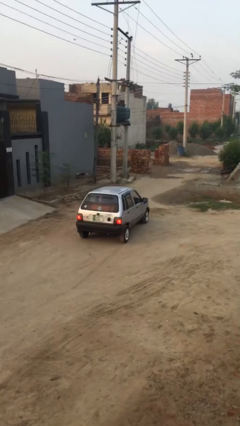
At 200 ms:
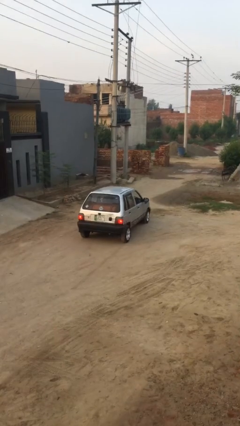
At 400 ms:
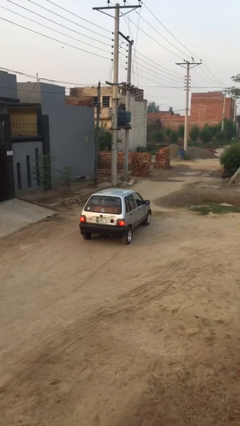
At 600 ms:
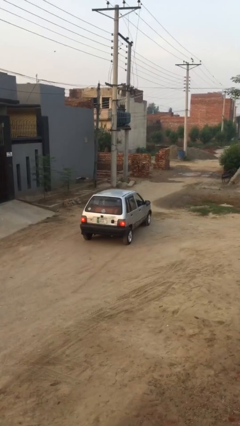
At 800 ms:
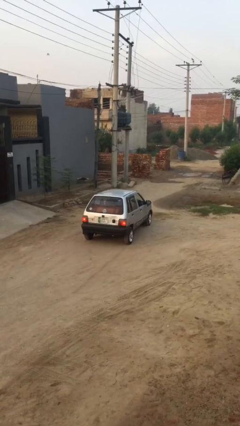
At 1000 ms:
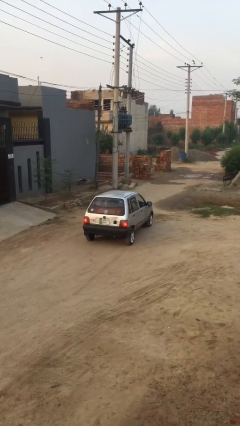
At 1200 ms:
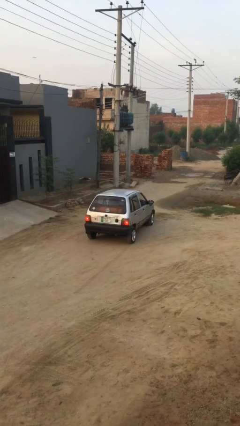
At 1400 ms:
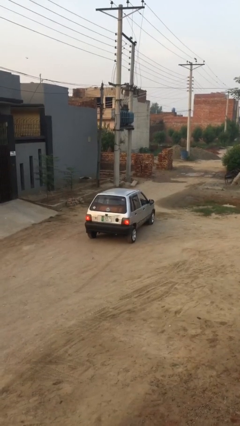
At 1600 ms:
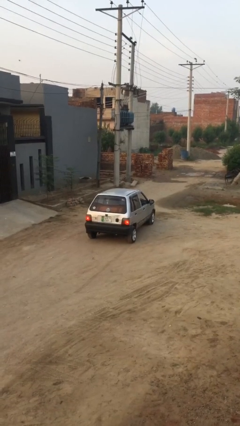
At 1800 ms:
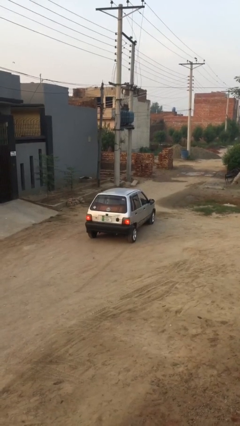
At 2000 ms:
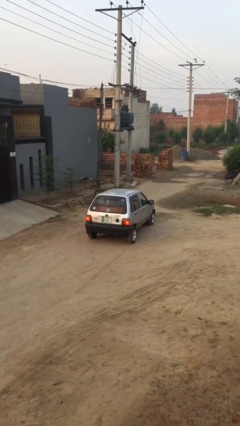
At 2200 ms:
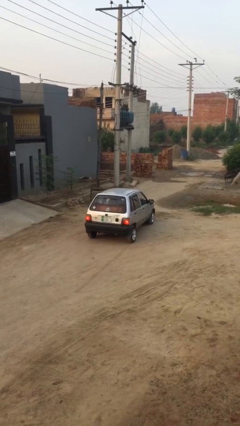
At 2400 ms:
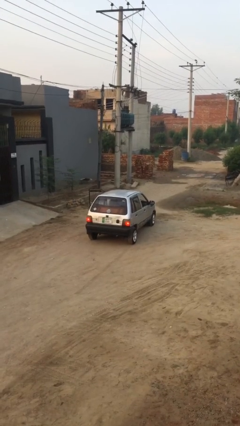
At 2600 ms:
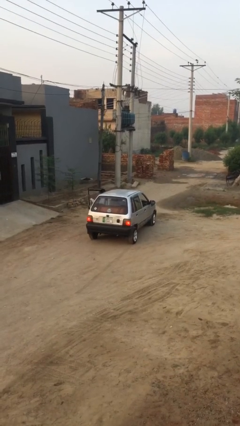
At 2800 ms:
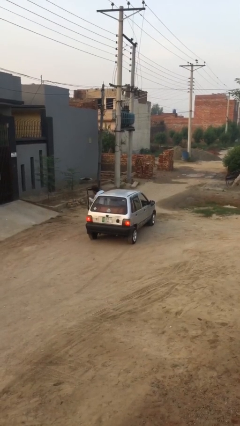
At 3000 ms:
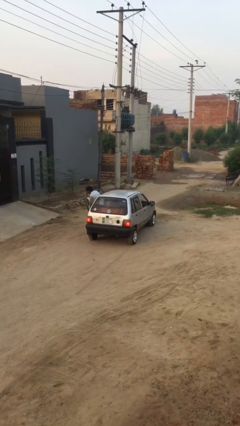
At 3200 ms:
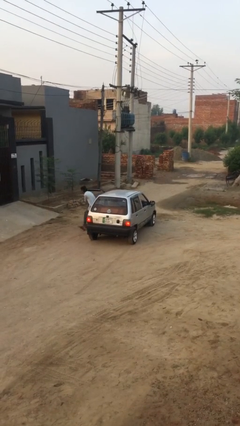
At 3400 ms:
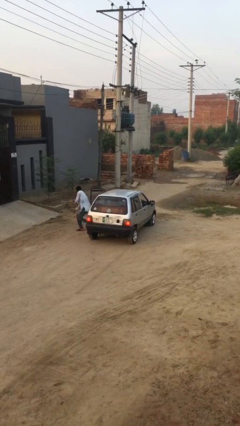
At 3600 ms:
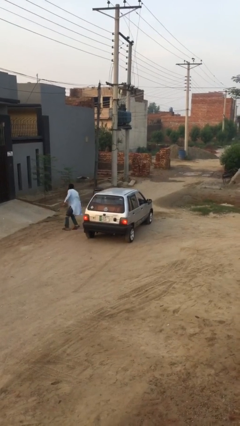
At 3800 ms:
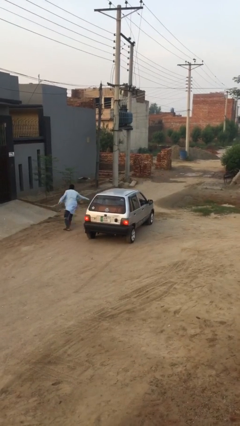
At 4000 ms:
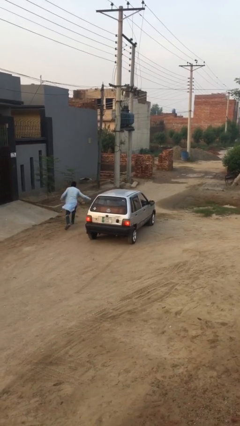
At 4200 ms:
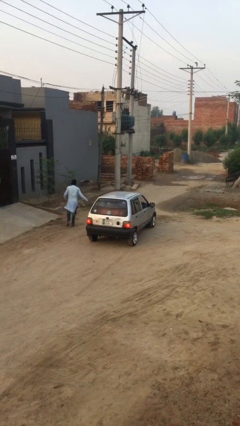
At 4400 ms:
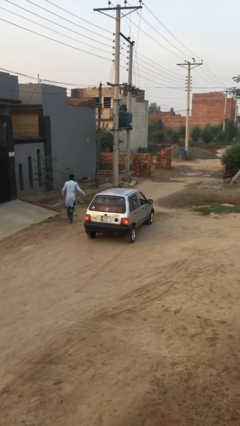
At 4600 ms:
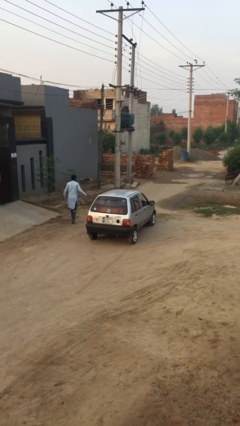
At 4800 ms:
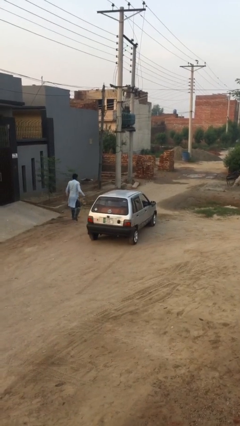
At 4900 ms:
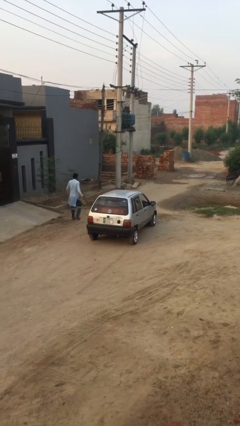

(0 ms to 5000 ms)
car drops off person

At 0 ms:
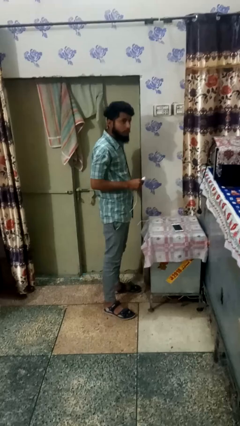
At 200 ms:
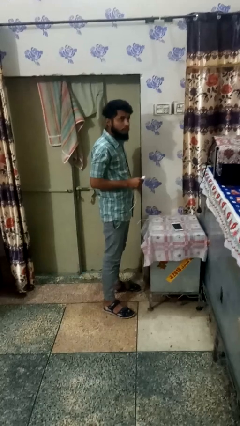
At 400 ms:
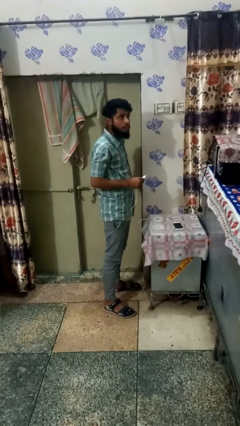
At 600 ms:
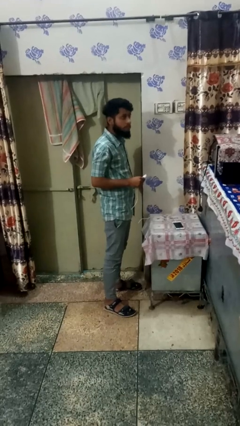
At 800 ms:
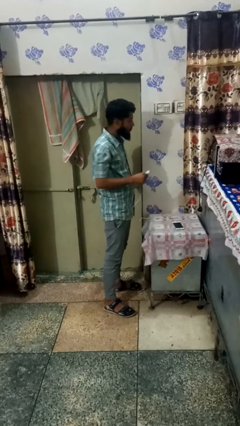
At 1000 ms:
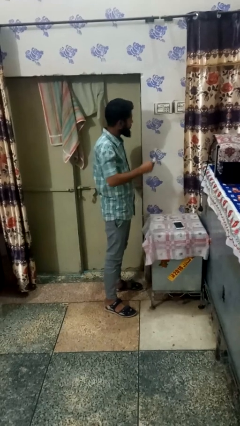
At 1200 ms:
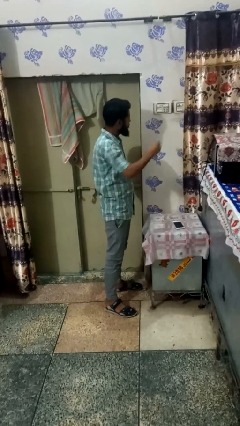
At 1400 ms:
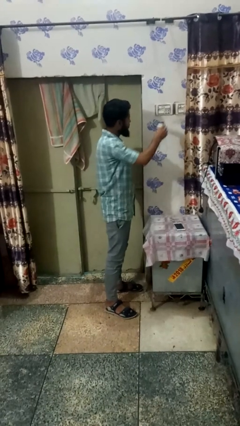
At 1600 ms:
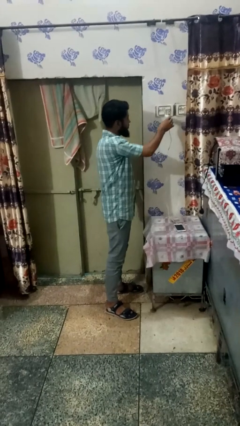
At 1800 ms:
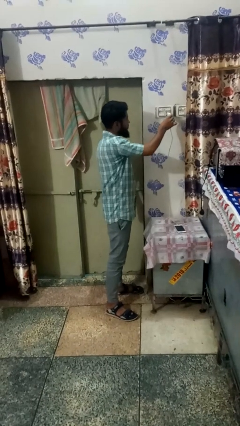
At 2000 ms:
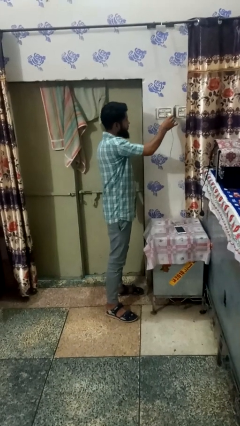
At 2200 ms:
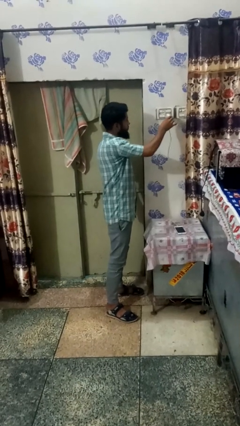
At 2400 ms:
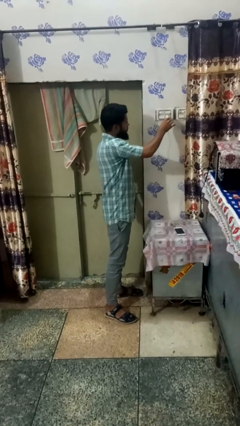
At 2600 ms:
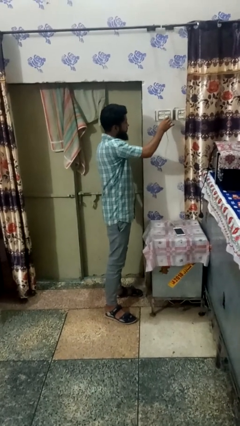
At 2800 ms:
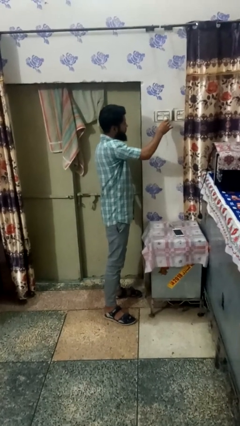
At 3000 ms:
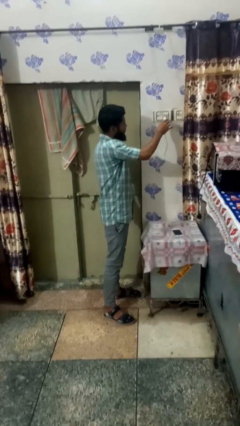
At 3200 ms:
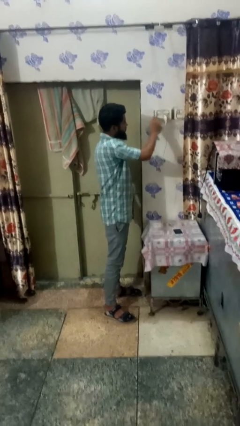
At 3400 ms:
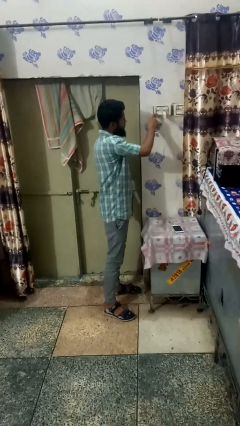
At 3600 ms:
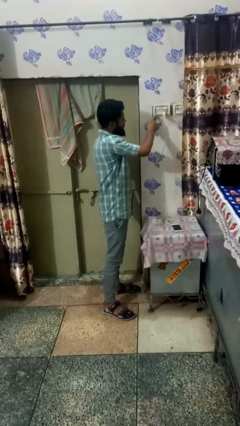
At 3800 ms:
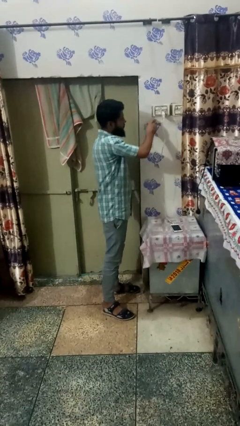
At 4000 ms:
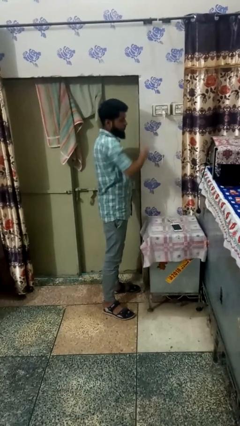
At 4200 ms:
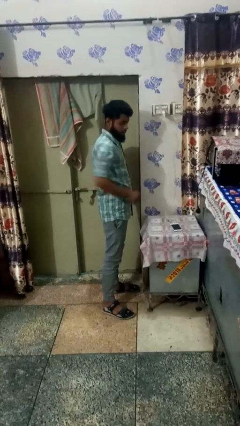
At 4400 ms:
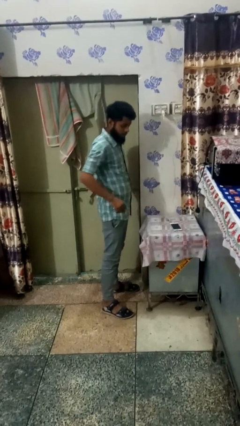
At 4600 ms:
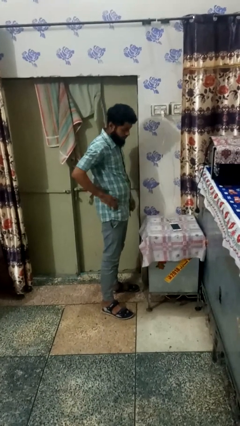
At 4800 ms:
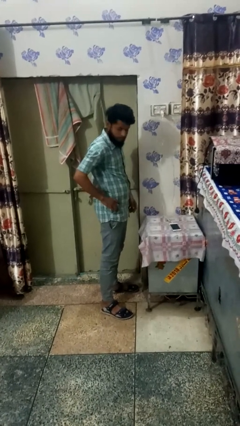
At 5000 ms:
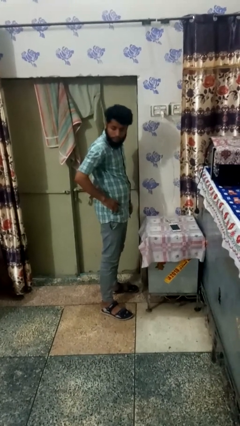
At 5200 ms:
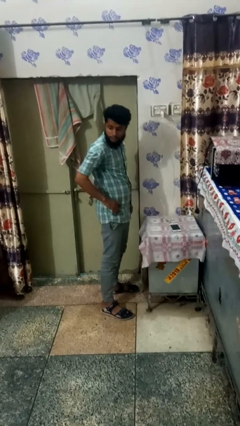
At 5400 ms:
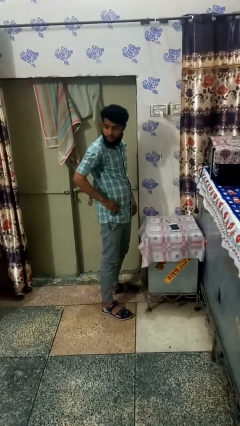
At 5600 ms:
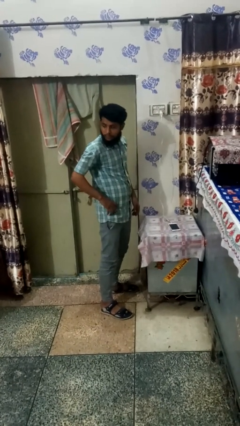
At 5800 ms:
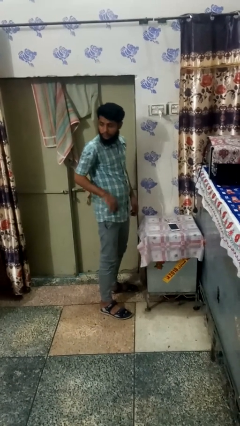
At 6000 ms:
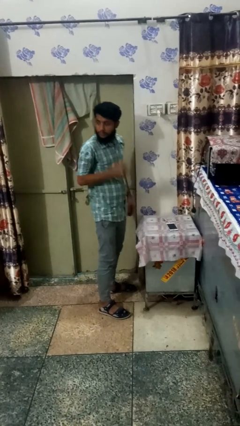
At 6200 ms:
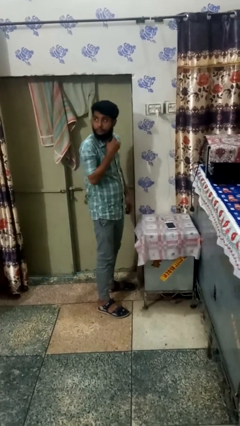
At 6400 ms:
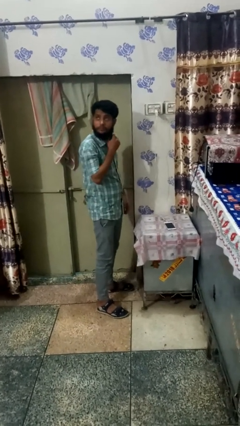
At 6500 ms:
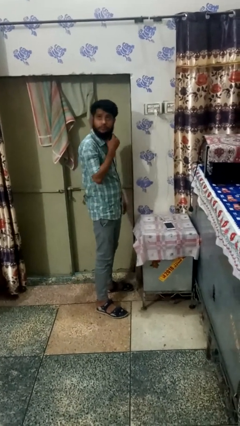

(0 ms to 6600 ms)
person plugs into electrical socket

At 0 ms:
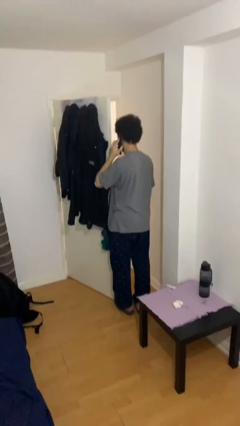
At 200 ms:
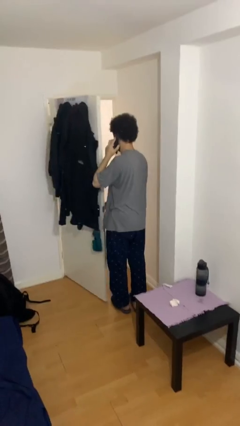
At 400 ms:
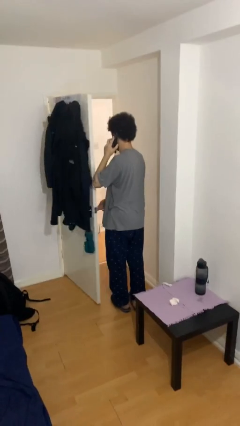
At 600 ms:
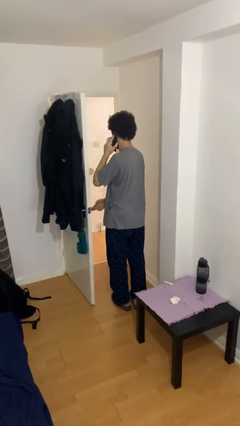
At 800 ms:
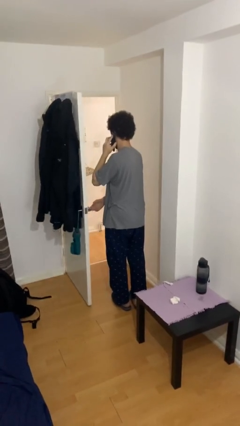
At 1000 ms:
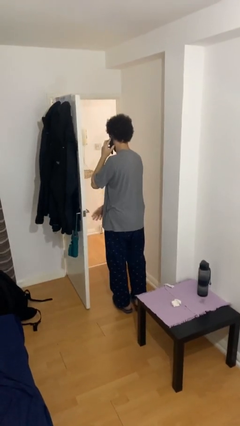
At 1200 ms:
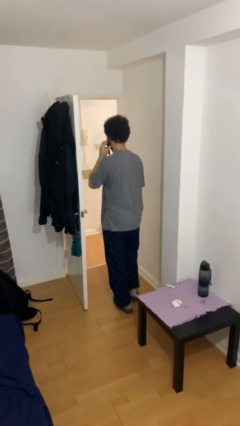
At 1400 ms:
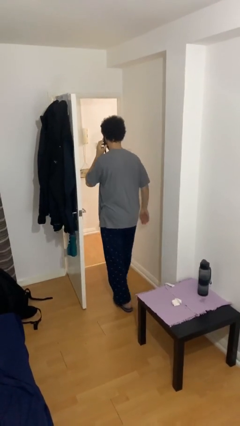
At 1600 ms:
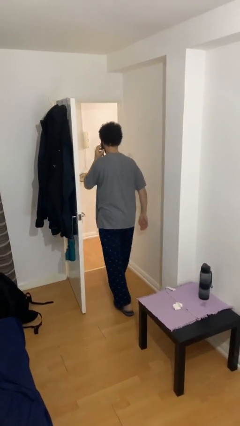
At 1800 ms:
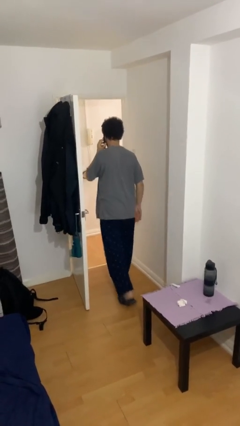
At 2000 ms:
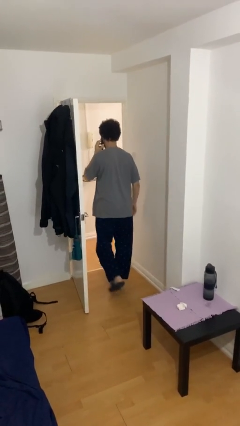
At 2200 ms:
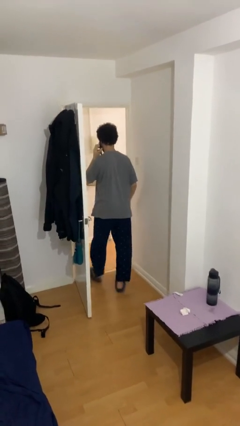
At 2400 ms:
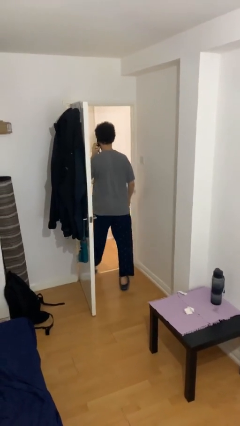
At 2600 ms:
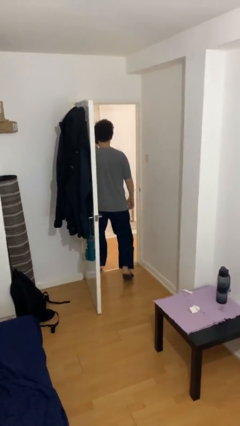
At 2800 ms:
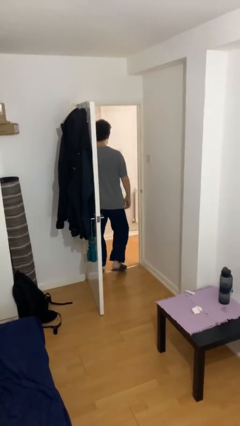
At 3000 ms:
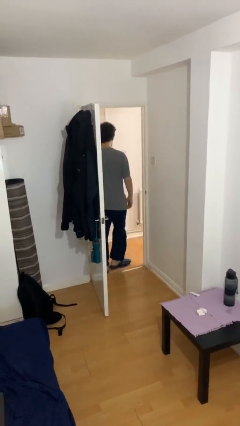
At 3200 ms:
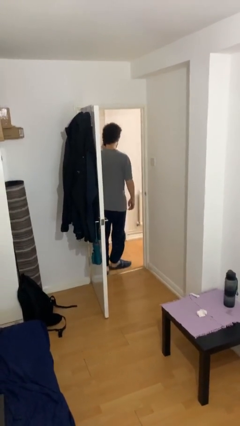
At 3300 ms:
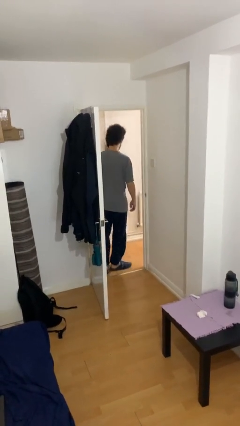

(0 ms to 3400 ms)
person exits scene through structure

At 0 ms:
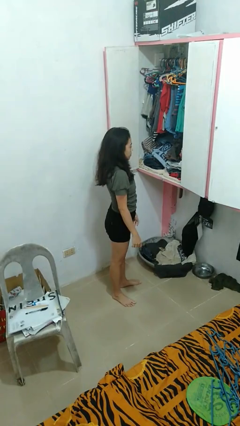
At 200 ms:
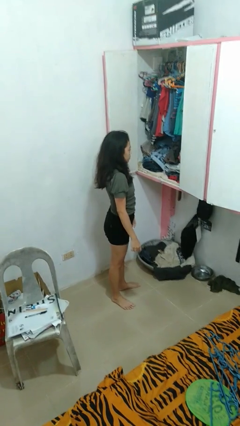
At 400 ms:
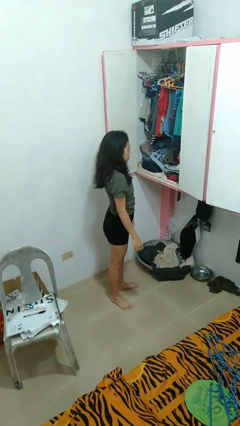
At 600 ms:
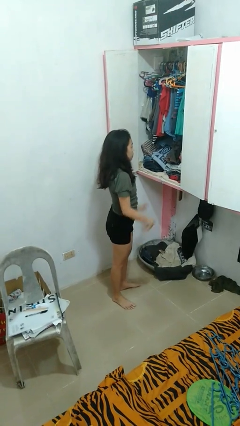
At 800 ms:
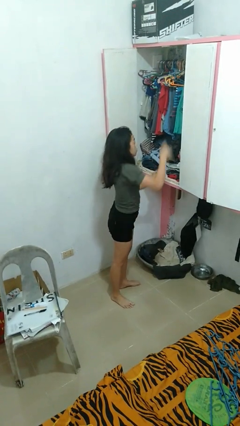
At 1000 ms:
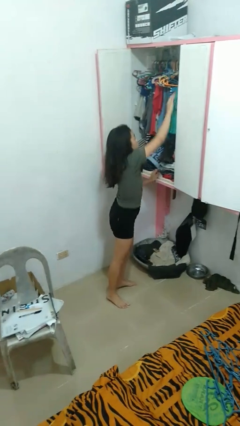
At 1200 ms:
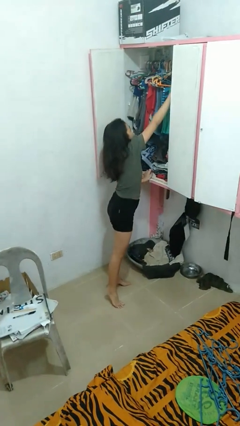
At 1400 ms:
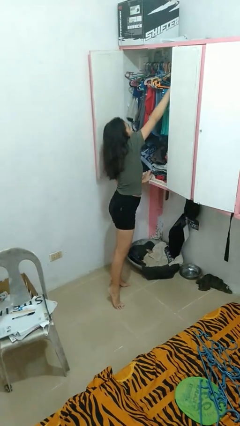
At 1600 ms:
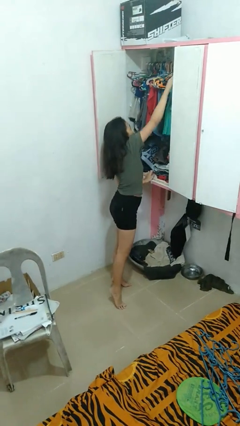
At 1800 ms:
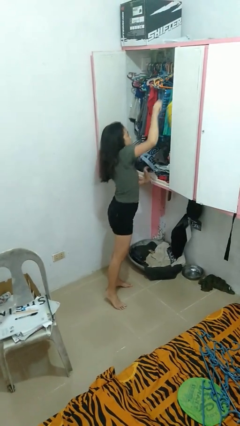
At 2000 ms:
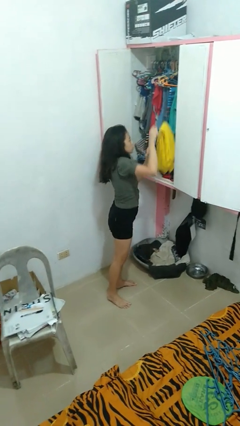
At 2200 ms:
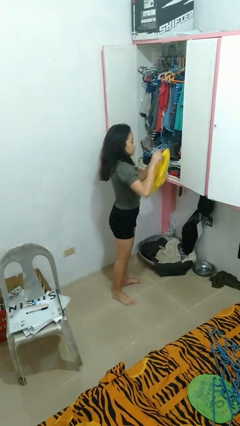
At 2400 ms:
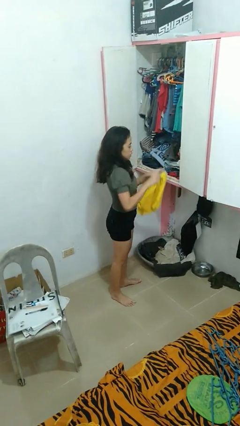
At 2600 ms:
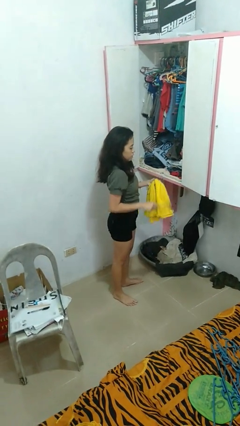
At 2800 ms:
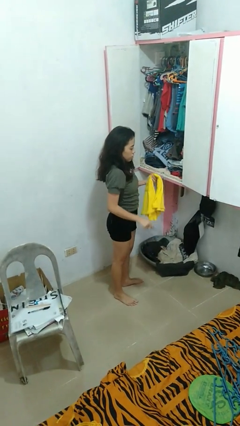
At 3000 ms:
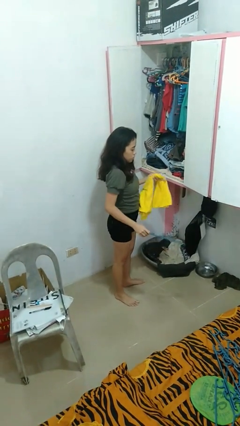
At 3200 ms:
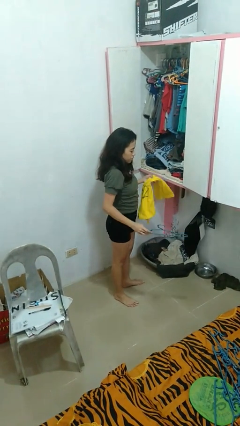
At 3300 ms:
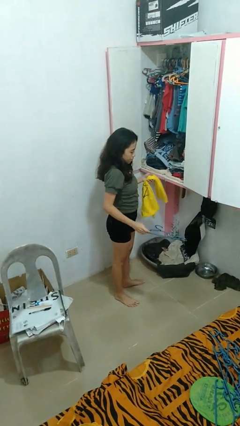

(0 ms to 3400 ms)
person takes clothes from closet
